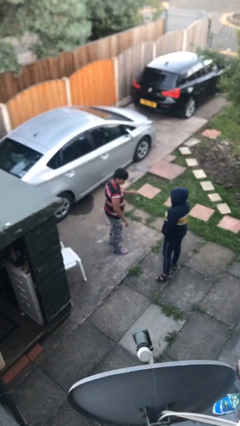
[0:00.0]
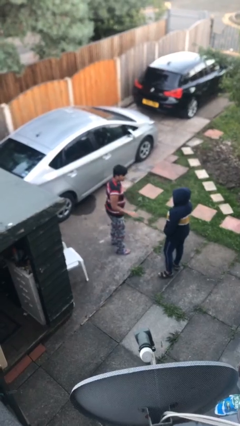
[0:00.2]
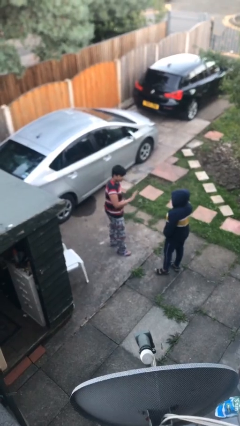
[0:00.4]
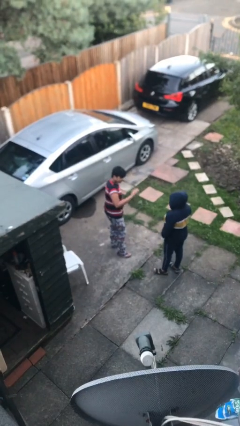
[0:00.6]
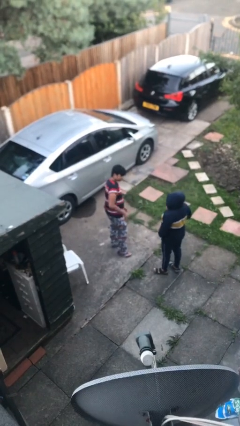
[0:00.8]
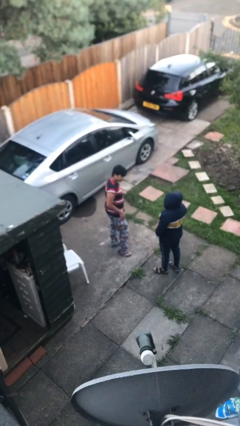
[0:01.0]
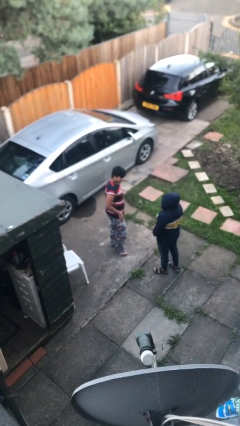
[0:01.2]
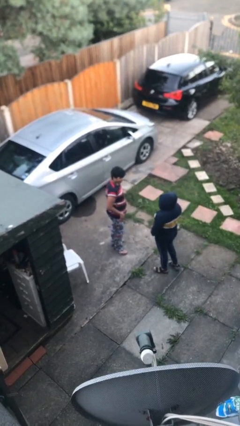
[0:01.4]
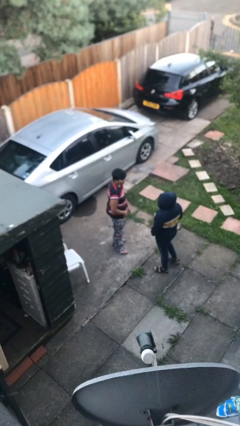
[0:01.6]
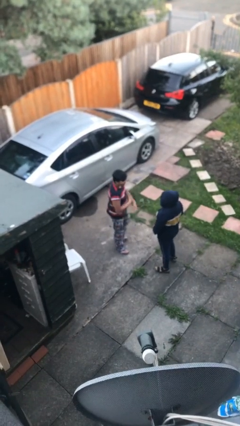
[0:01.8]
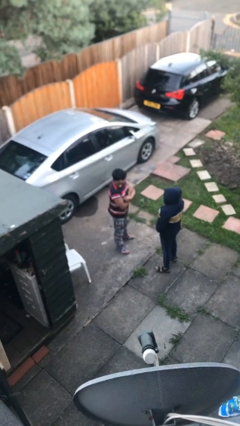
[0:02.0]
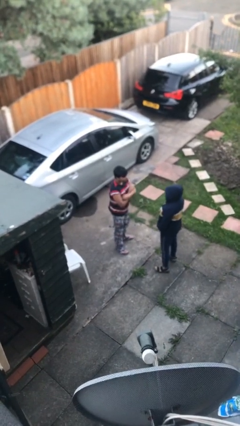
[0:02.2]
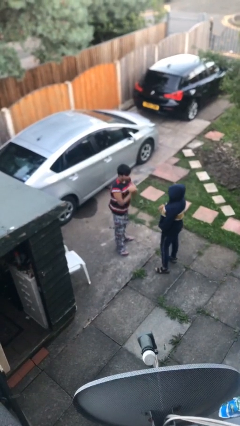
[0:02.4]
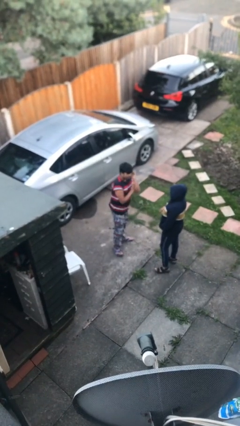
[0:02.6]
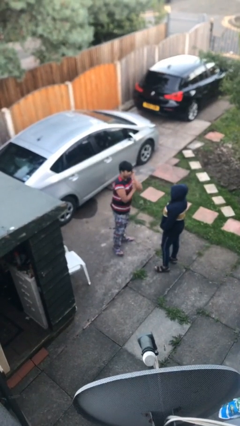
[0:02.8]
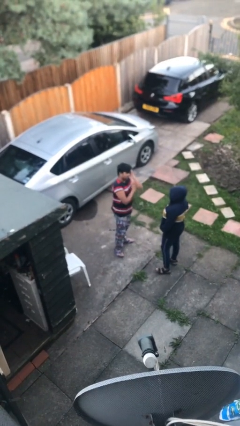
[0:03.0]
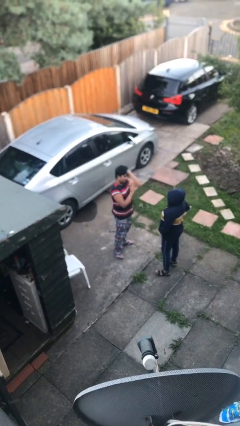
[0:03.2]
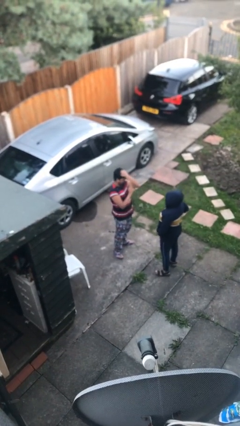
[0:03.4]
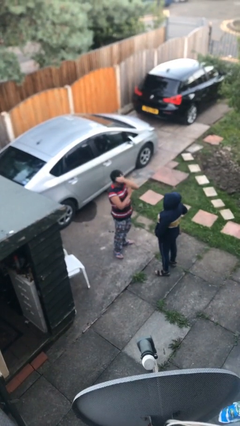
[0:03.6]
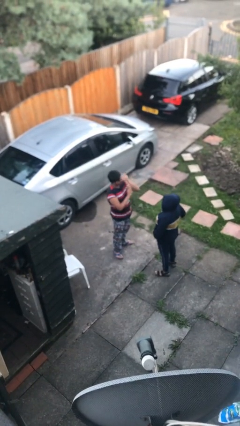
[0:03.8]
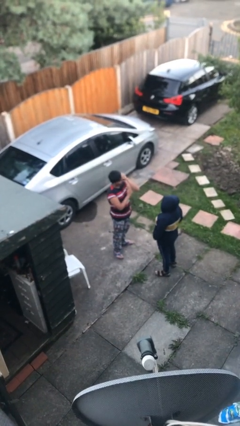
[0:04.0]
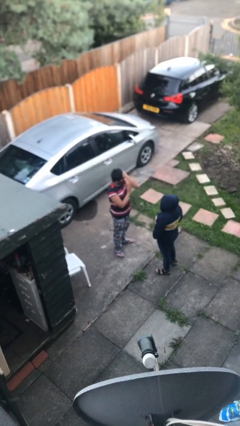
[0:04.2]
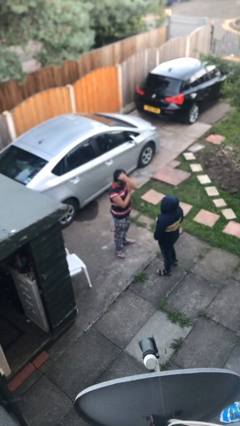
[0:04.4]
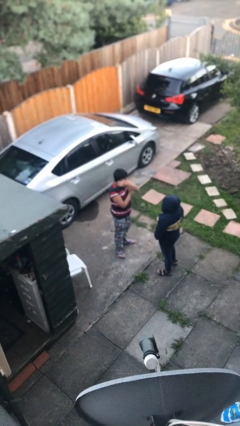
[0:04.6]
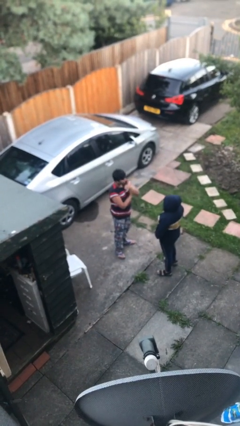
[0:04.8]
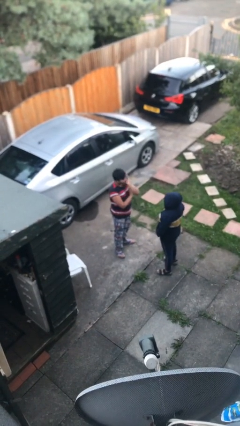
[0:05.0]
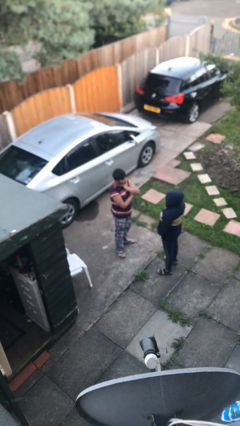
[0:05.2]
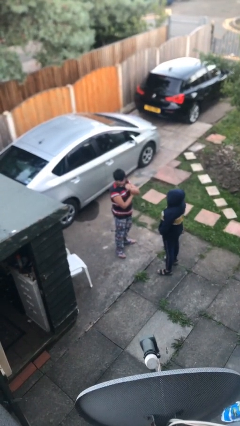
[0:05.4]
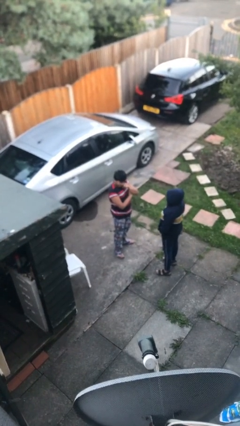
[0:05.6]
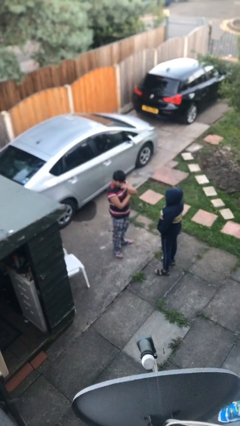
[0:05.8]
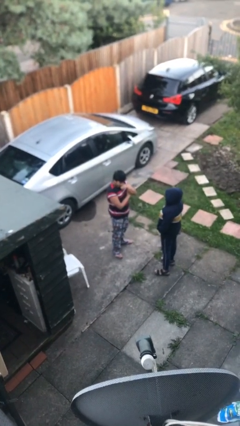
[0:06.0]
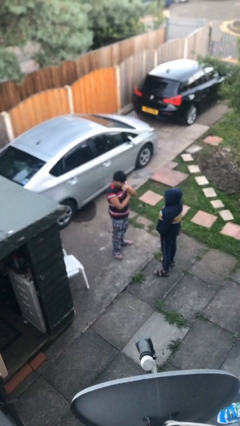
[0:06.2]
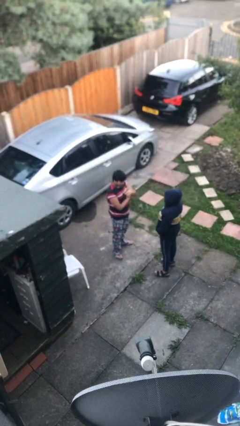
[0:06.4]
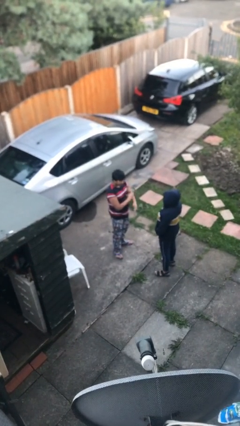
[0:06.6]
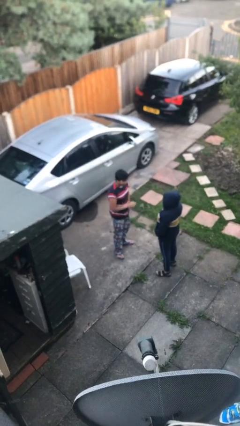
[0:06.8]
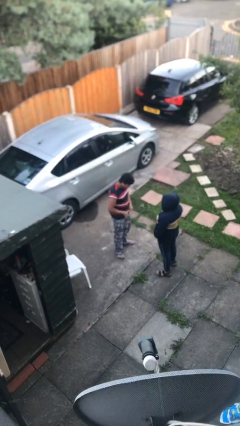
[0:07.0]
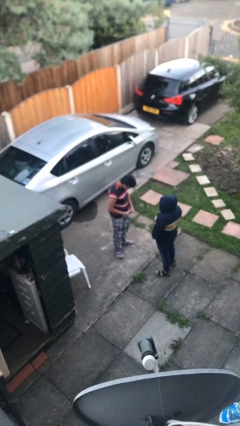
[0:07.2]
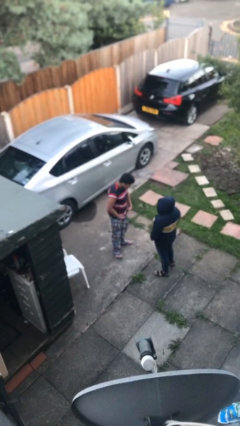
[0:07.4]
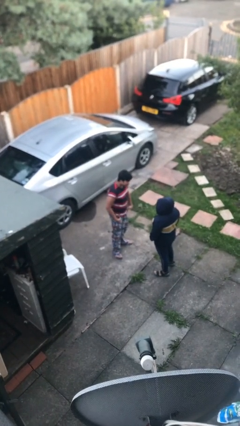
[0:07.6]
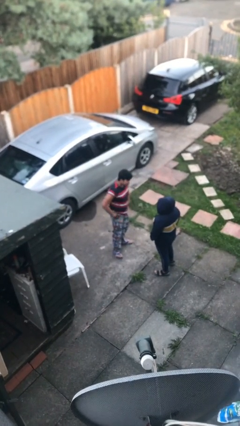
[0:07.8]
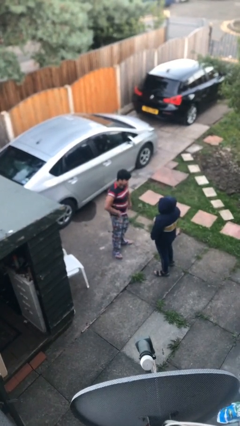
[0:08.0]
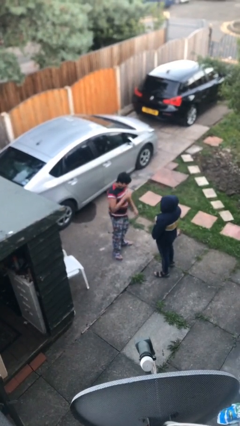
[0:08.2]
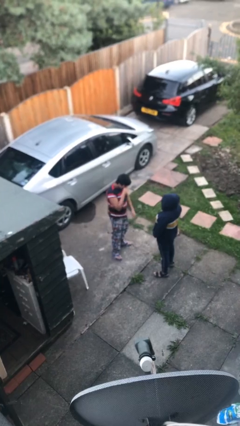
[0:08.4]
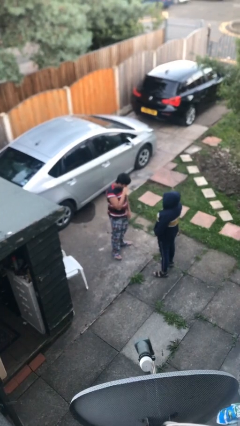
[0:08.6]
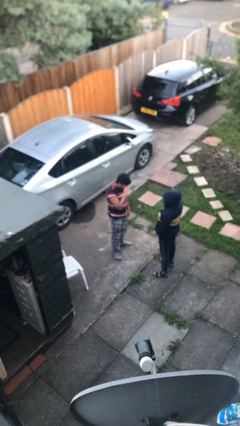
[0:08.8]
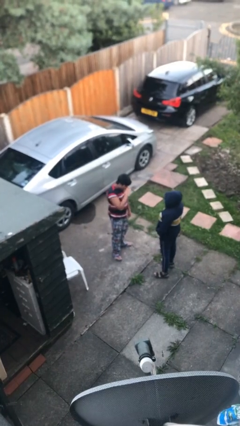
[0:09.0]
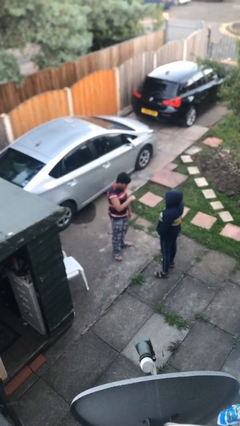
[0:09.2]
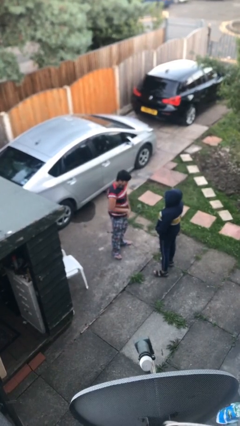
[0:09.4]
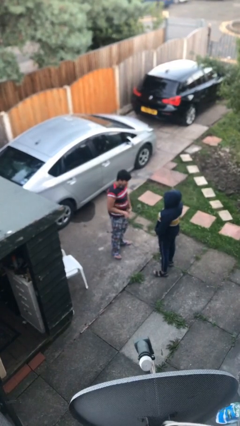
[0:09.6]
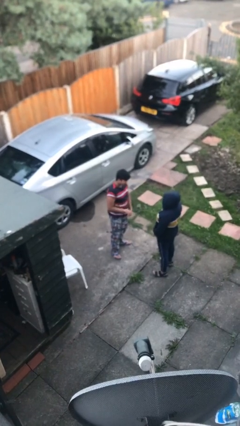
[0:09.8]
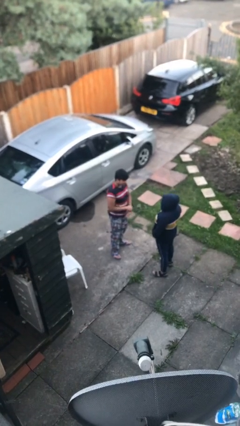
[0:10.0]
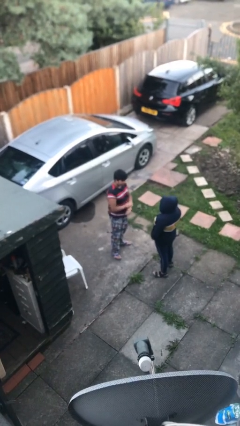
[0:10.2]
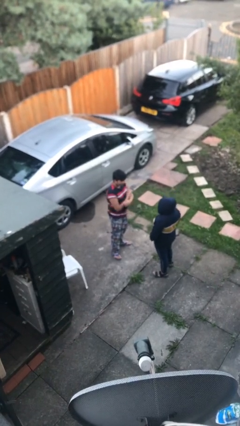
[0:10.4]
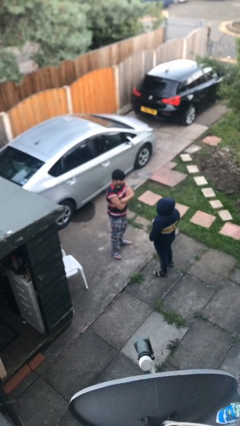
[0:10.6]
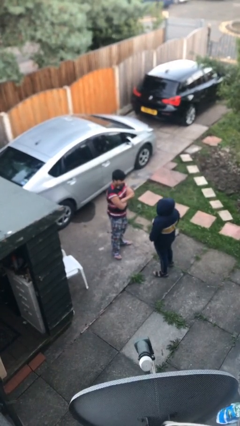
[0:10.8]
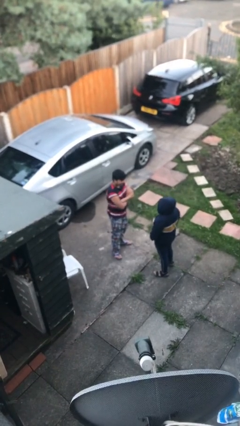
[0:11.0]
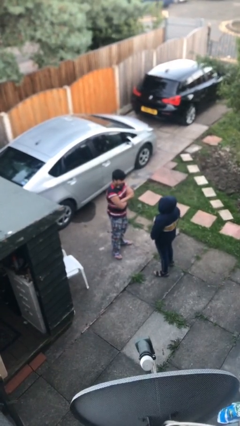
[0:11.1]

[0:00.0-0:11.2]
person talks to person

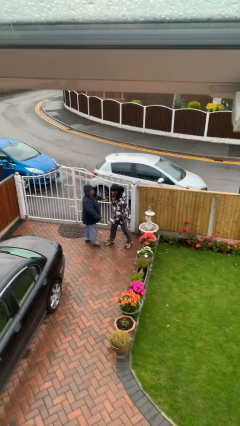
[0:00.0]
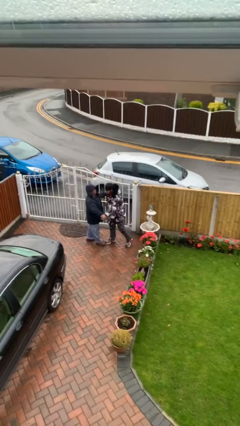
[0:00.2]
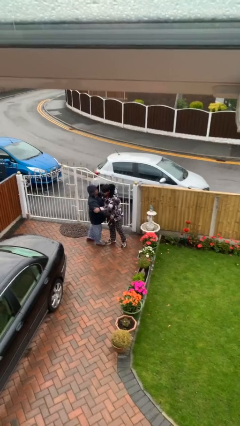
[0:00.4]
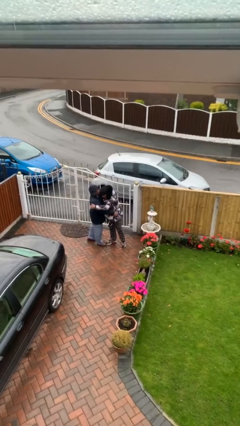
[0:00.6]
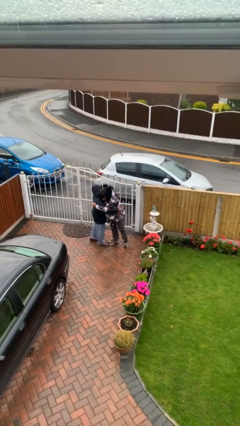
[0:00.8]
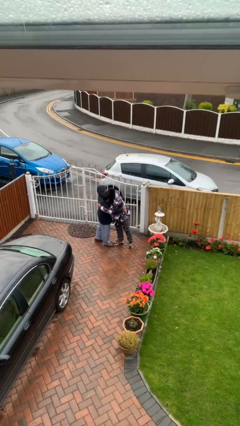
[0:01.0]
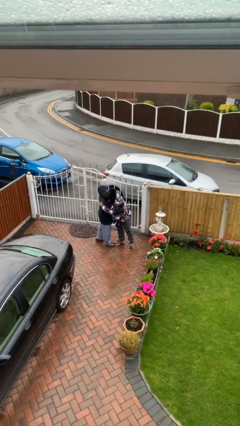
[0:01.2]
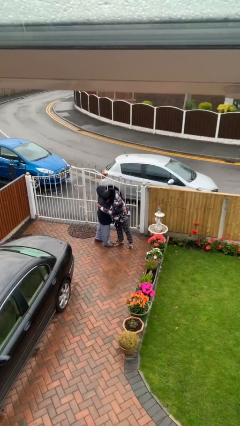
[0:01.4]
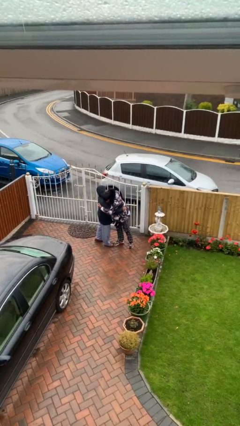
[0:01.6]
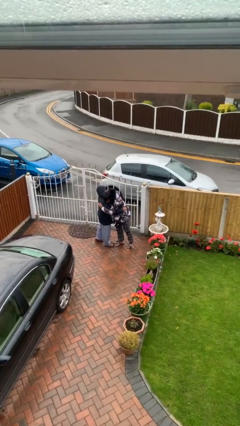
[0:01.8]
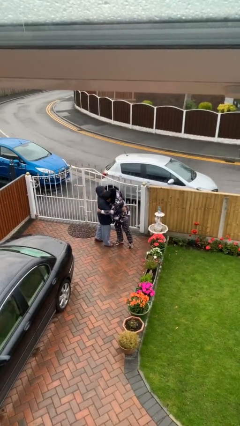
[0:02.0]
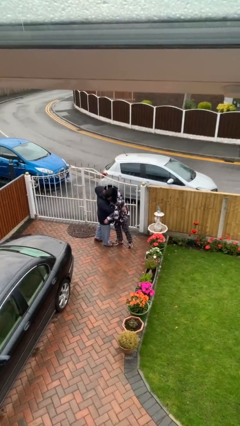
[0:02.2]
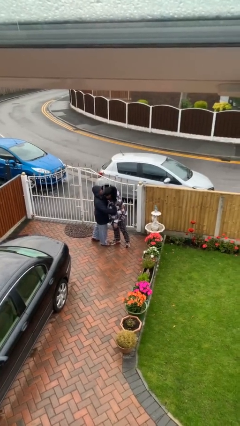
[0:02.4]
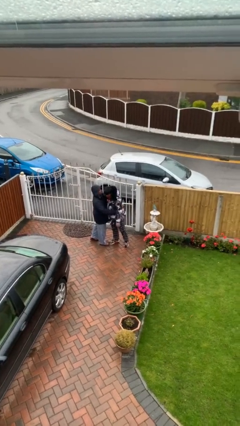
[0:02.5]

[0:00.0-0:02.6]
person embraces person

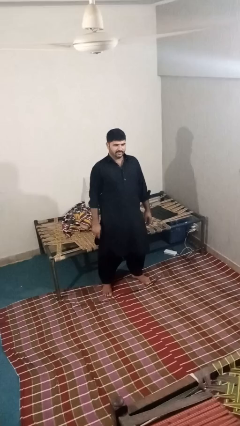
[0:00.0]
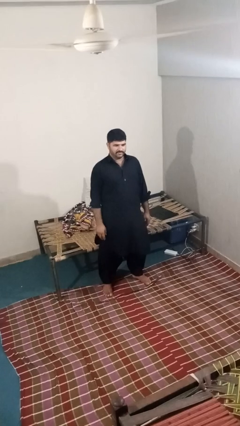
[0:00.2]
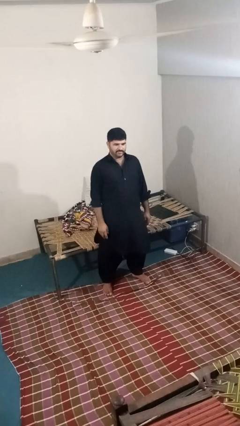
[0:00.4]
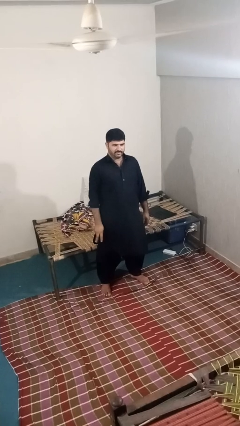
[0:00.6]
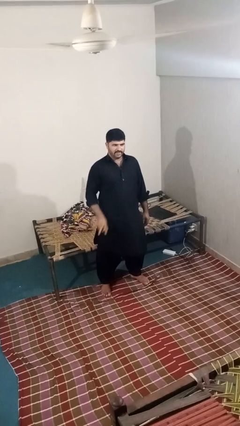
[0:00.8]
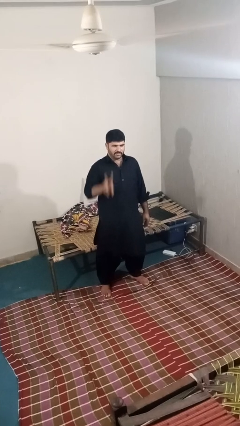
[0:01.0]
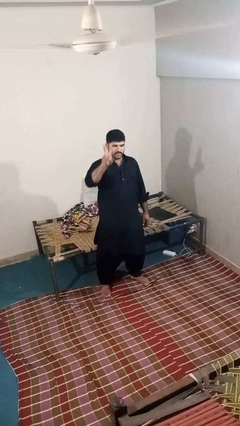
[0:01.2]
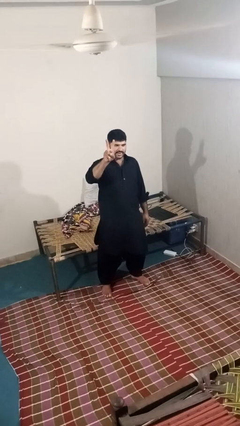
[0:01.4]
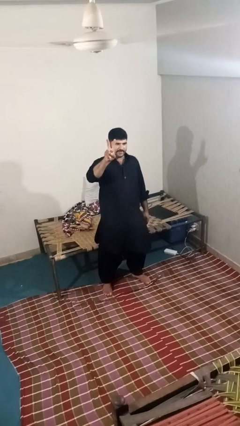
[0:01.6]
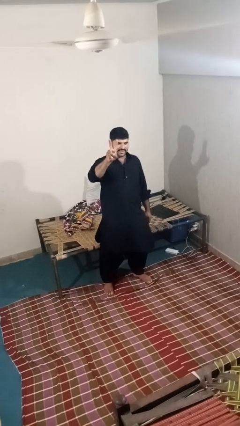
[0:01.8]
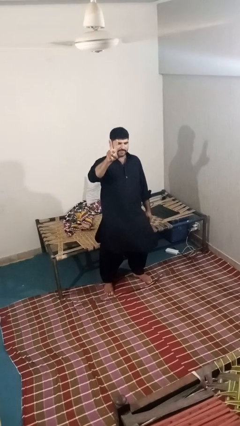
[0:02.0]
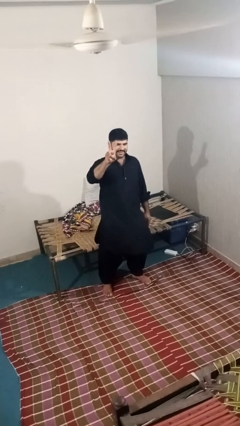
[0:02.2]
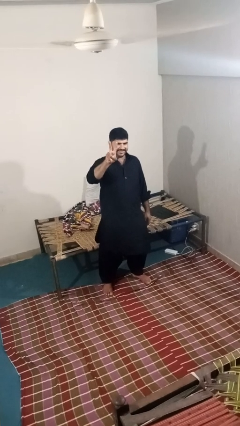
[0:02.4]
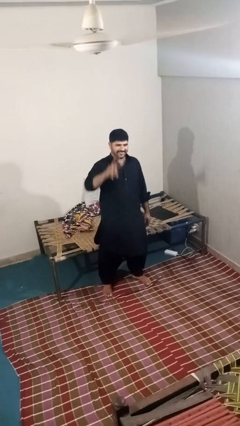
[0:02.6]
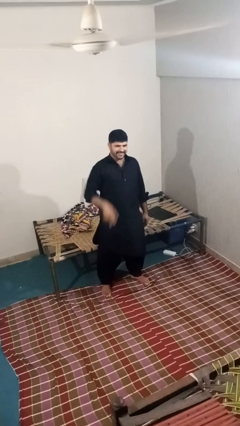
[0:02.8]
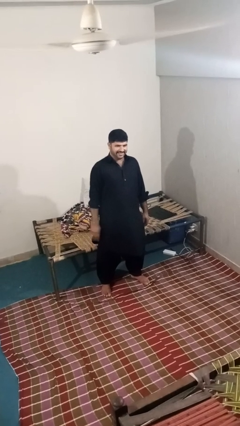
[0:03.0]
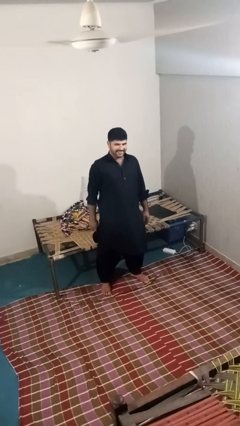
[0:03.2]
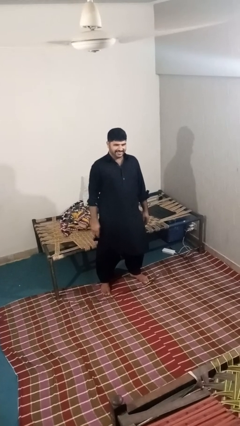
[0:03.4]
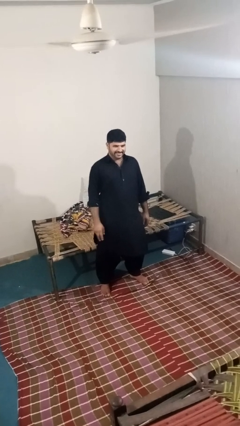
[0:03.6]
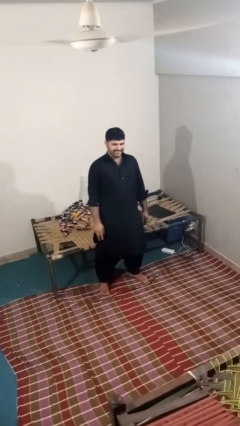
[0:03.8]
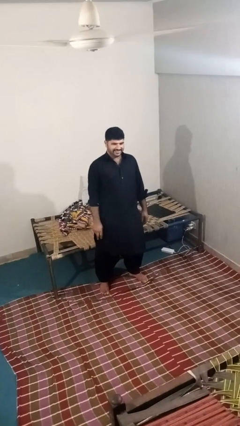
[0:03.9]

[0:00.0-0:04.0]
person gestures peace
